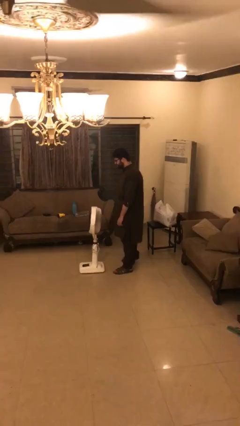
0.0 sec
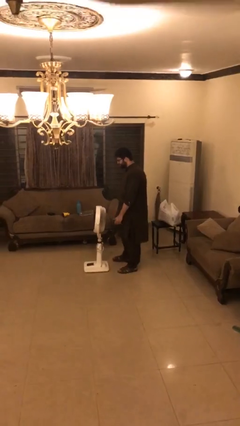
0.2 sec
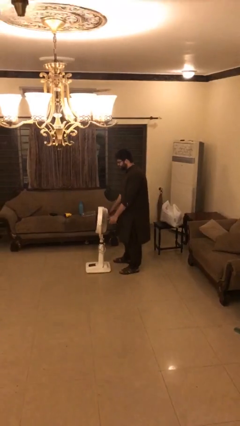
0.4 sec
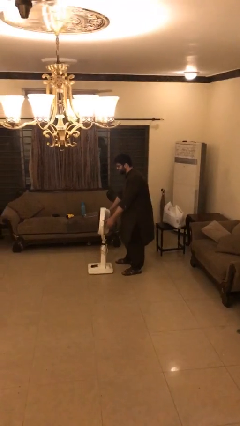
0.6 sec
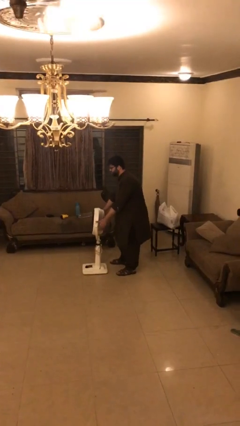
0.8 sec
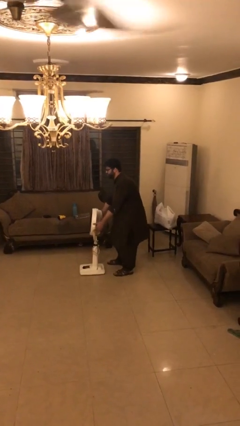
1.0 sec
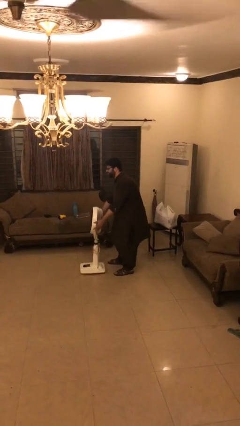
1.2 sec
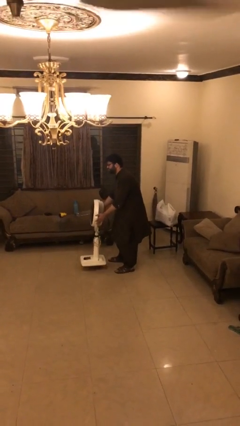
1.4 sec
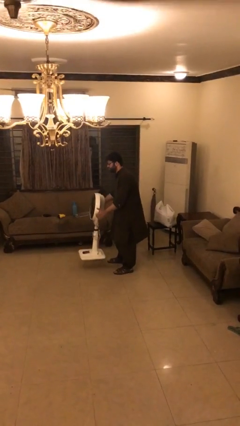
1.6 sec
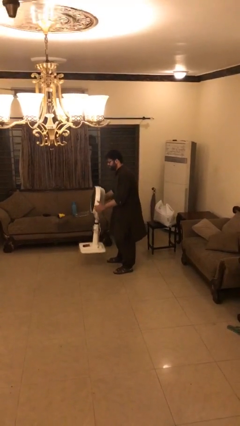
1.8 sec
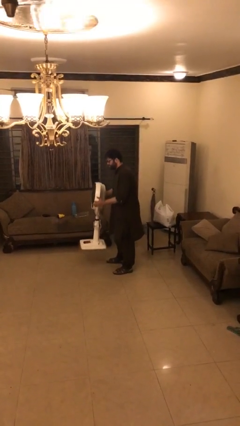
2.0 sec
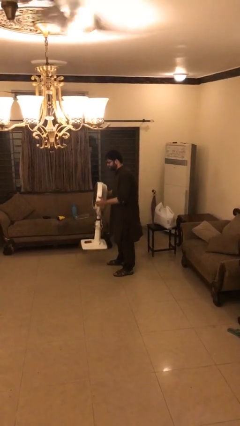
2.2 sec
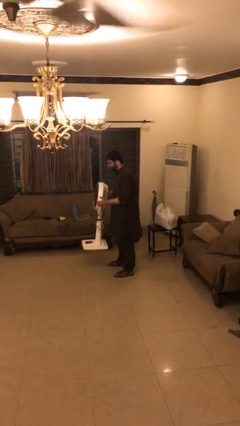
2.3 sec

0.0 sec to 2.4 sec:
person picks up object from floor

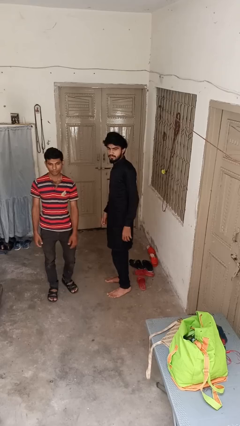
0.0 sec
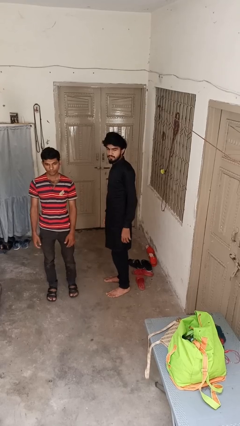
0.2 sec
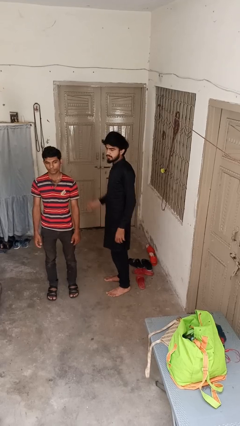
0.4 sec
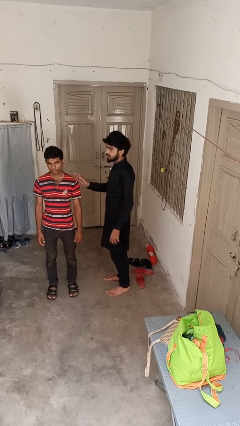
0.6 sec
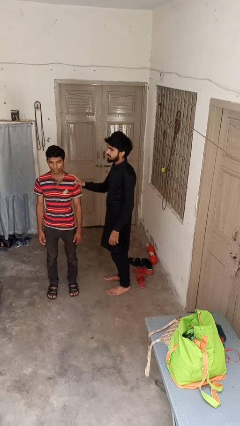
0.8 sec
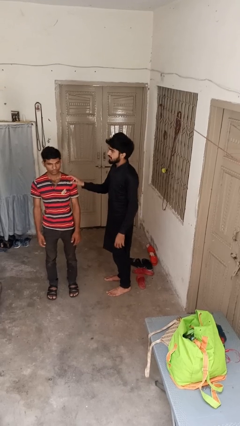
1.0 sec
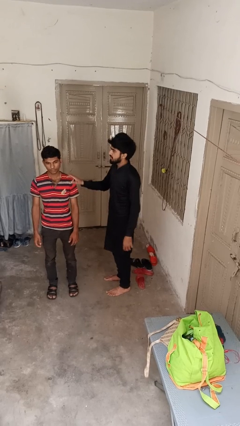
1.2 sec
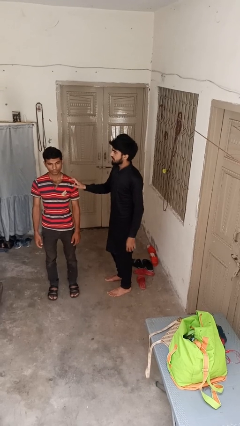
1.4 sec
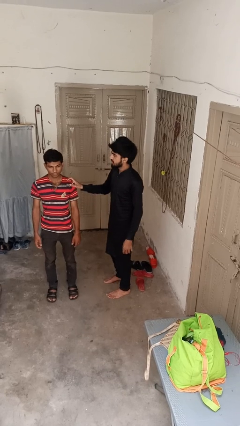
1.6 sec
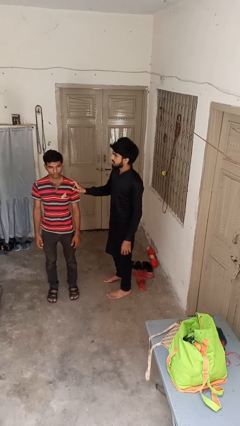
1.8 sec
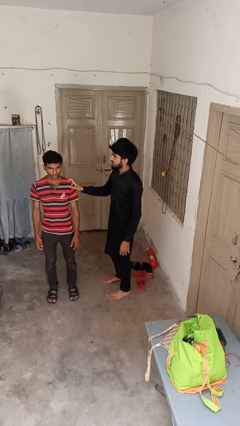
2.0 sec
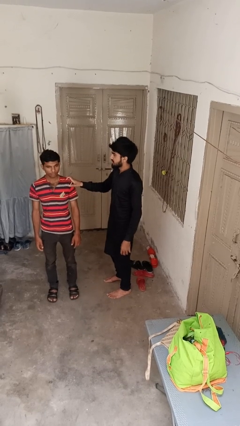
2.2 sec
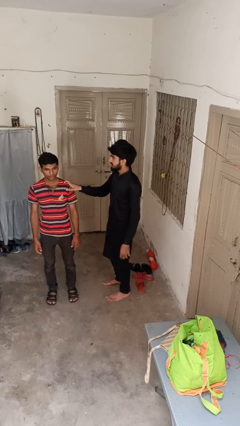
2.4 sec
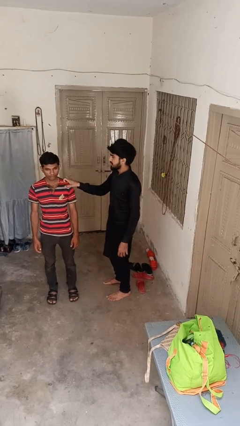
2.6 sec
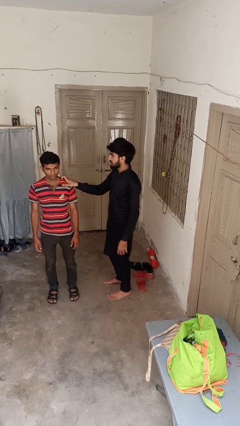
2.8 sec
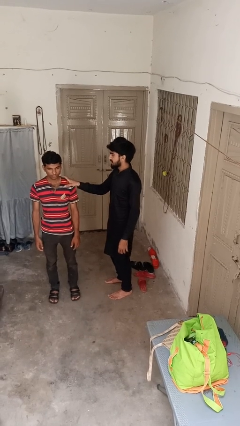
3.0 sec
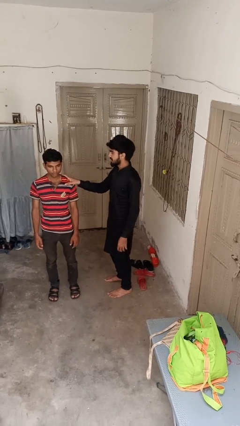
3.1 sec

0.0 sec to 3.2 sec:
person grabs person by shoulder

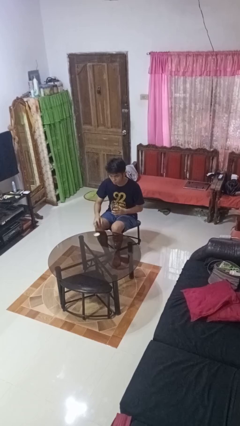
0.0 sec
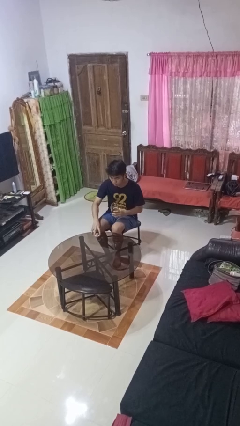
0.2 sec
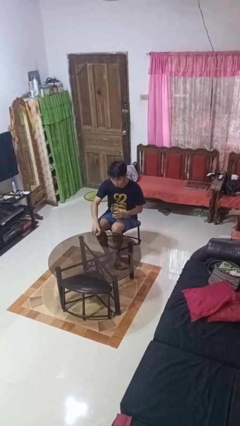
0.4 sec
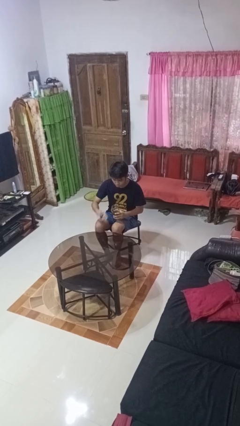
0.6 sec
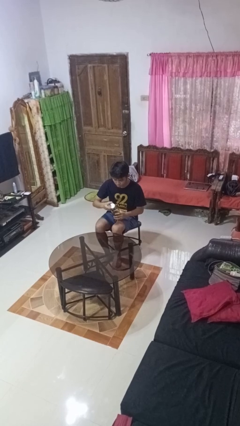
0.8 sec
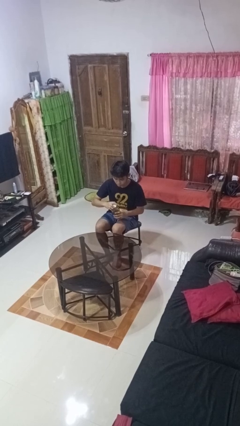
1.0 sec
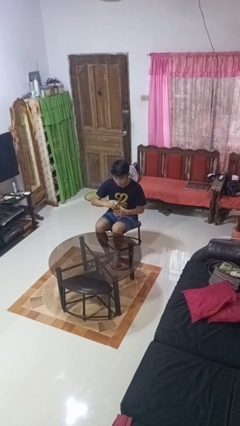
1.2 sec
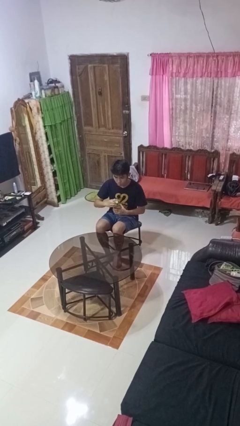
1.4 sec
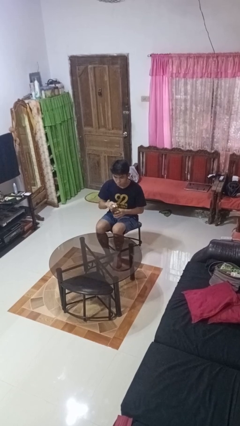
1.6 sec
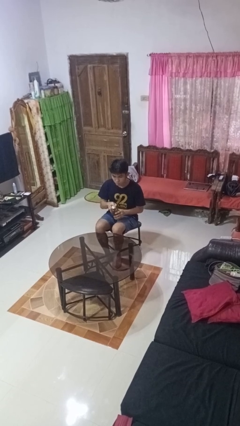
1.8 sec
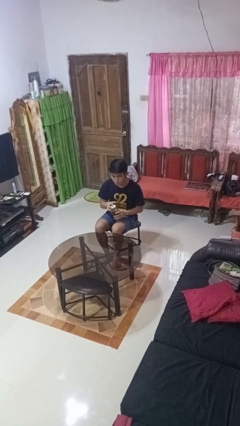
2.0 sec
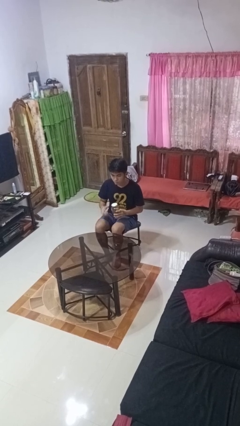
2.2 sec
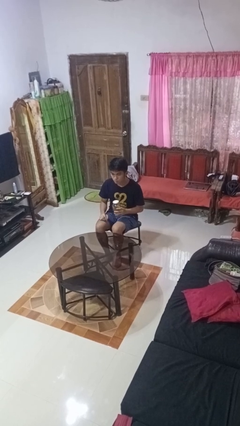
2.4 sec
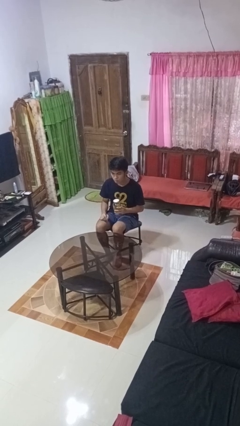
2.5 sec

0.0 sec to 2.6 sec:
person closes jar

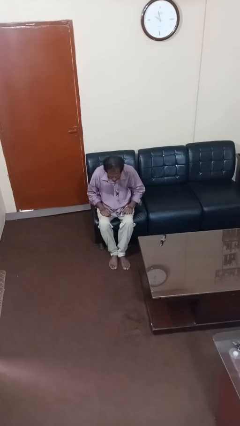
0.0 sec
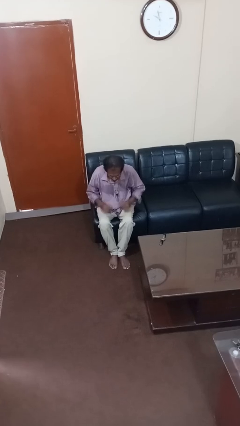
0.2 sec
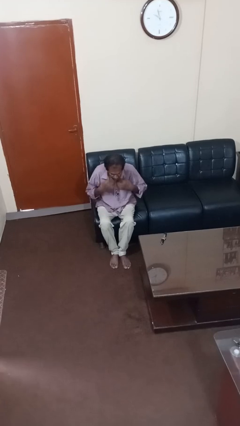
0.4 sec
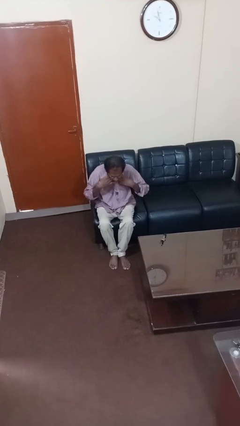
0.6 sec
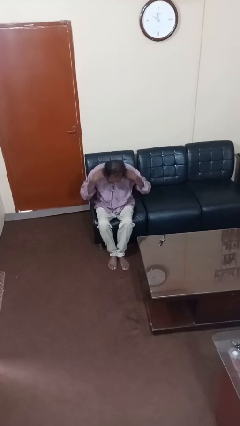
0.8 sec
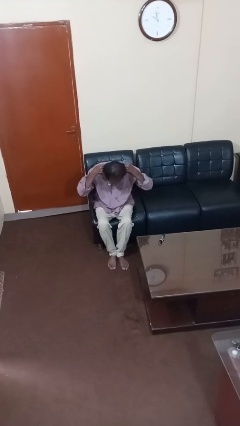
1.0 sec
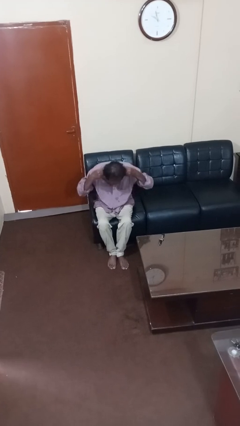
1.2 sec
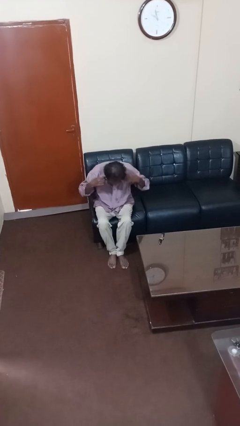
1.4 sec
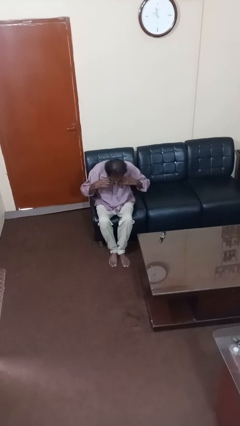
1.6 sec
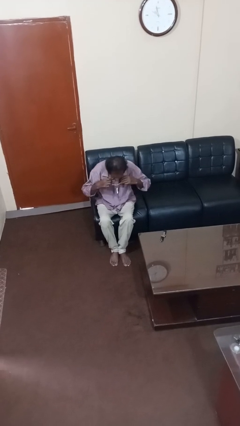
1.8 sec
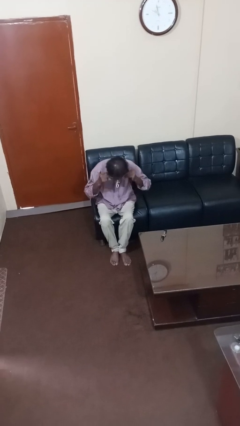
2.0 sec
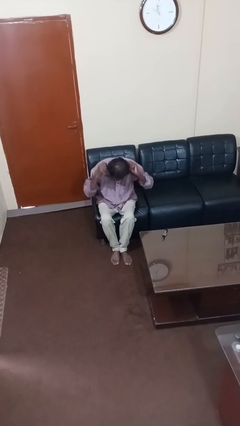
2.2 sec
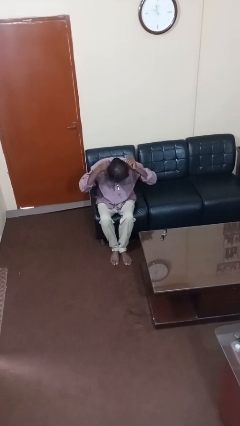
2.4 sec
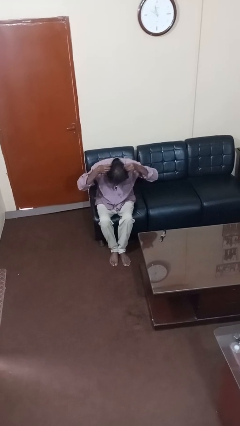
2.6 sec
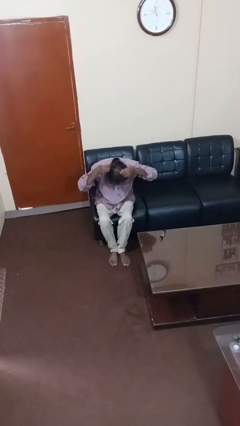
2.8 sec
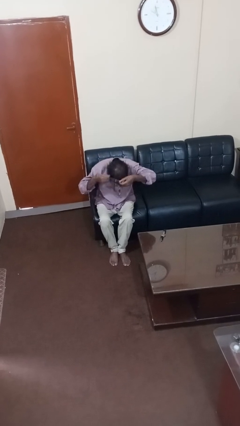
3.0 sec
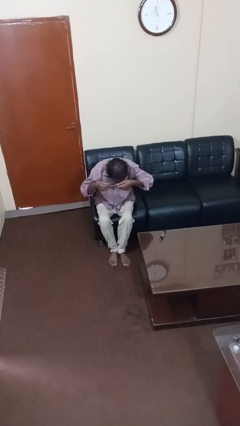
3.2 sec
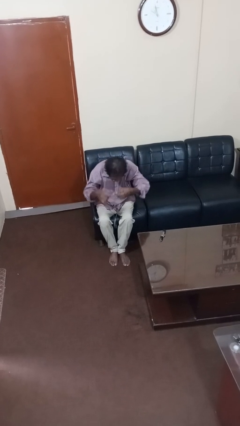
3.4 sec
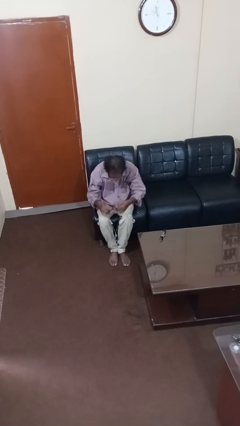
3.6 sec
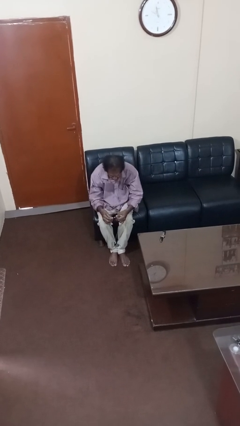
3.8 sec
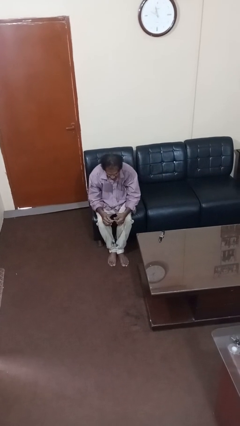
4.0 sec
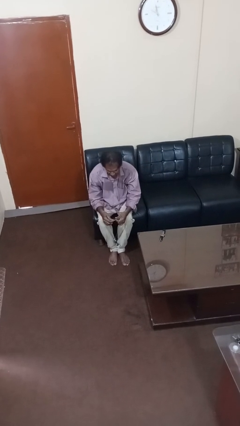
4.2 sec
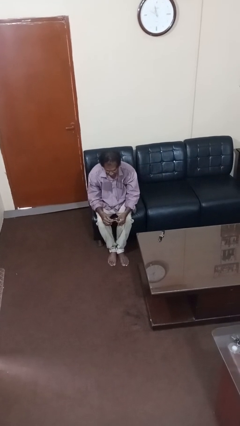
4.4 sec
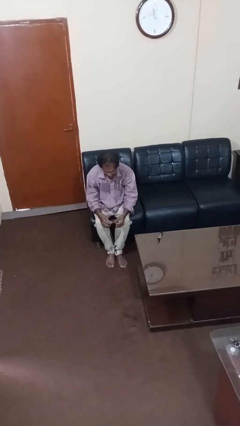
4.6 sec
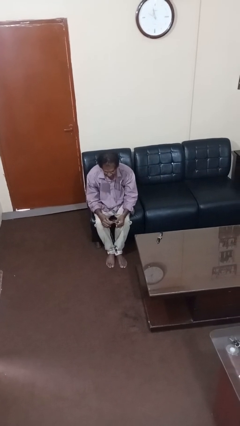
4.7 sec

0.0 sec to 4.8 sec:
person takes off necklace

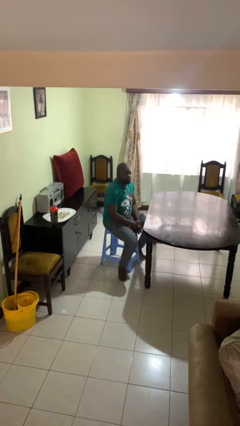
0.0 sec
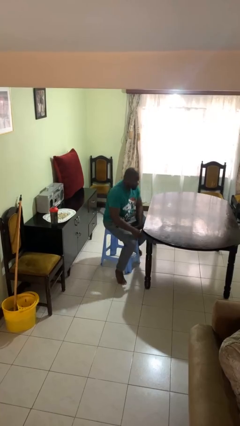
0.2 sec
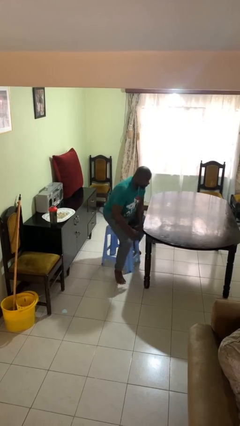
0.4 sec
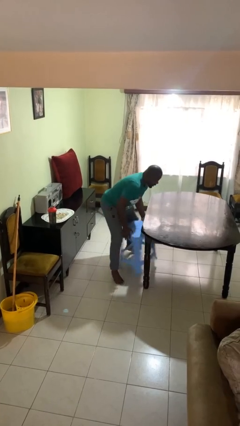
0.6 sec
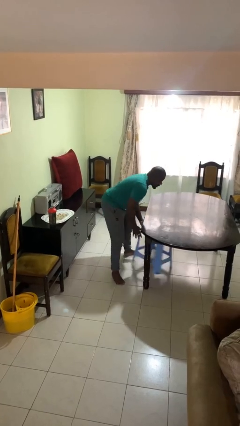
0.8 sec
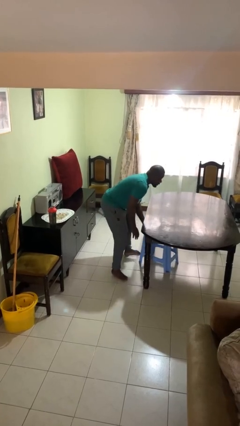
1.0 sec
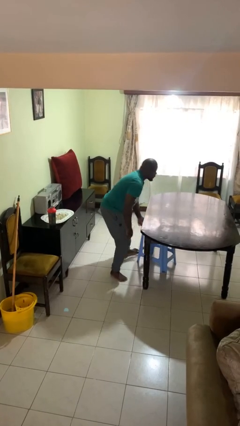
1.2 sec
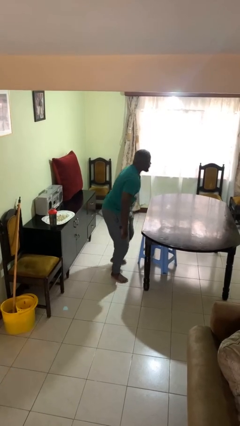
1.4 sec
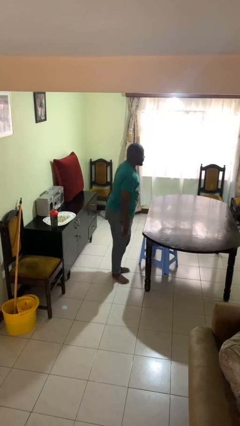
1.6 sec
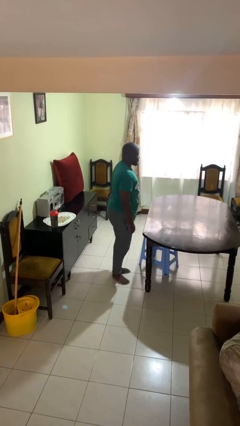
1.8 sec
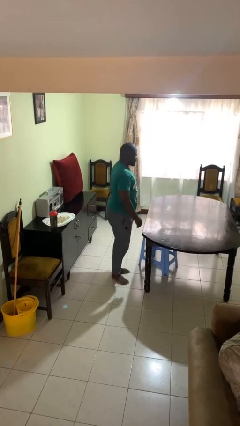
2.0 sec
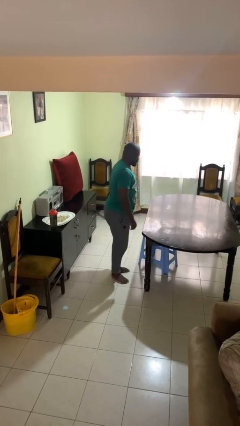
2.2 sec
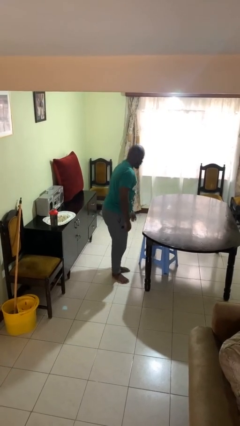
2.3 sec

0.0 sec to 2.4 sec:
person stands up

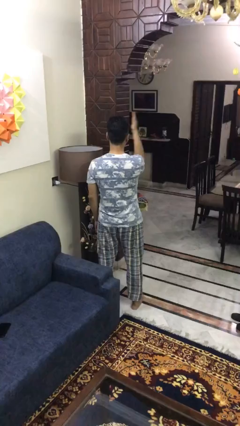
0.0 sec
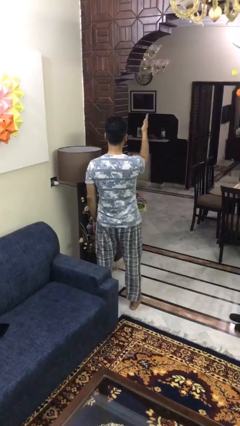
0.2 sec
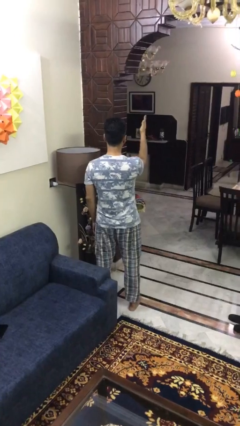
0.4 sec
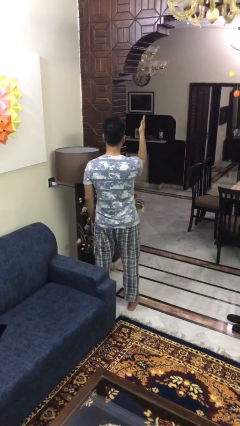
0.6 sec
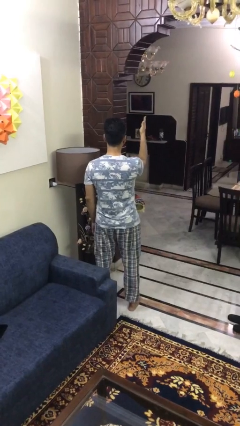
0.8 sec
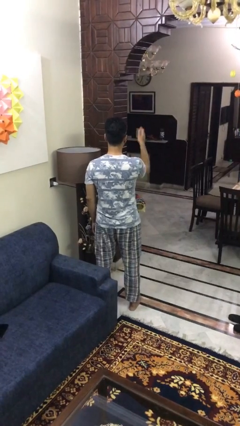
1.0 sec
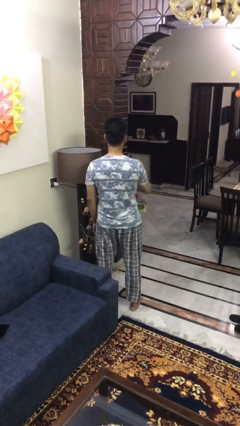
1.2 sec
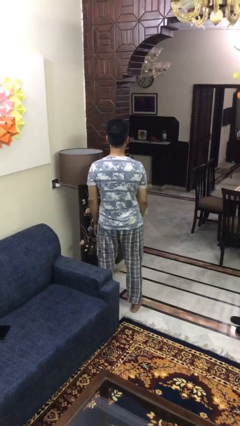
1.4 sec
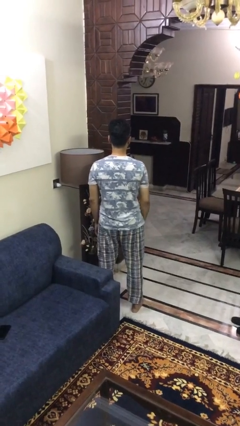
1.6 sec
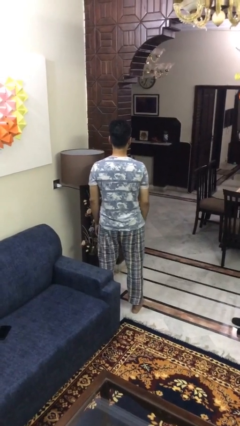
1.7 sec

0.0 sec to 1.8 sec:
person gestures swipe right
